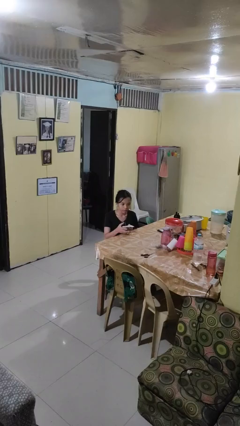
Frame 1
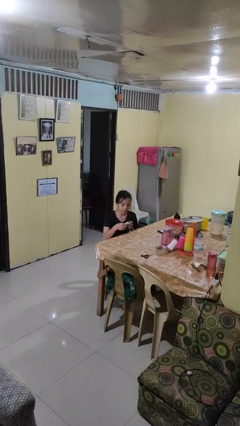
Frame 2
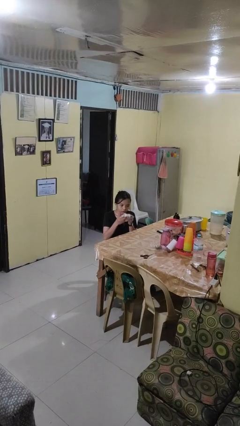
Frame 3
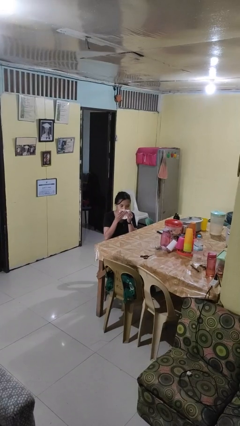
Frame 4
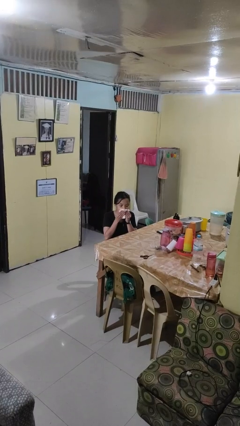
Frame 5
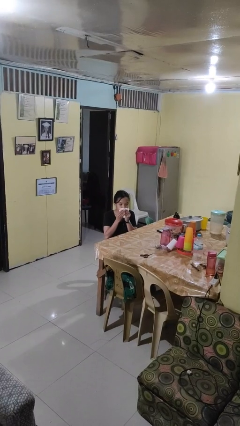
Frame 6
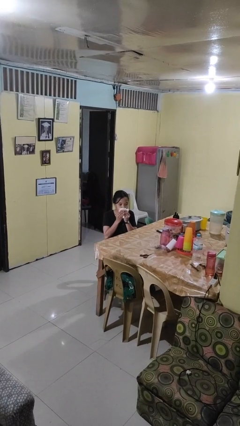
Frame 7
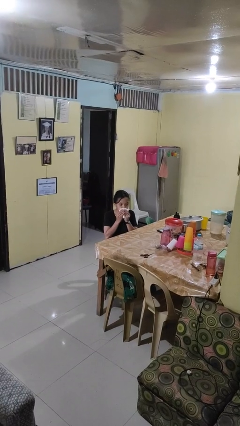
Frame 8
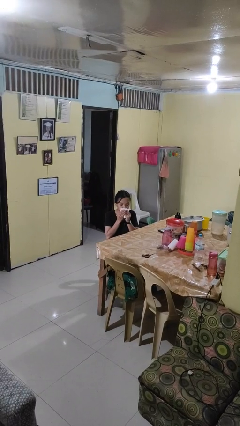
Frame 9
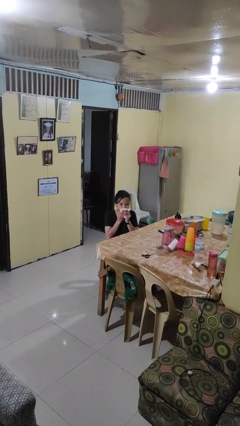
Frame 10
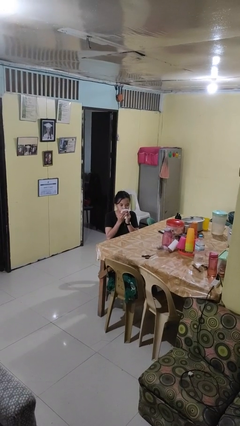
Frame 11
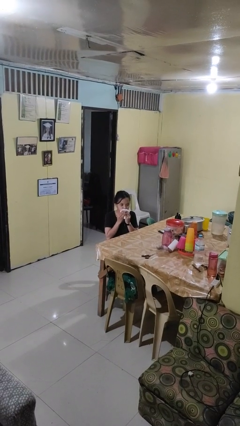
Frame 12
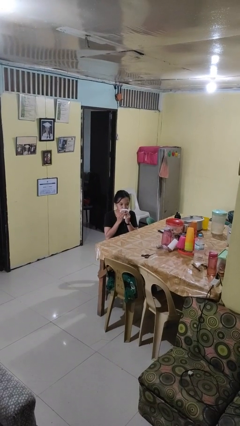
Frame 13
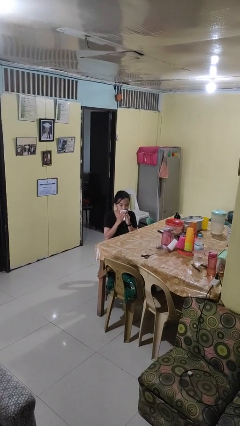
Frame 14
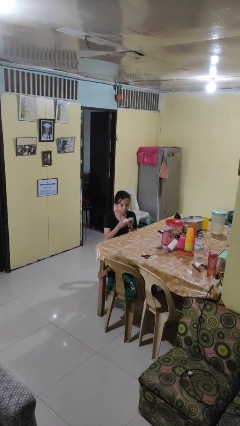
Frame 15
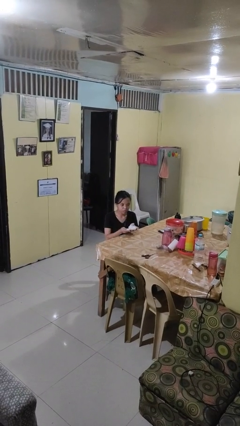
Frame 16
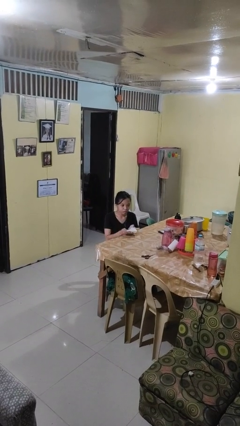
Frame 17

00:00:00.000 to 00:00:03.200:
person wipes mouth with napkin

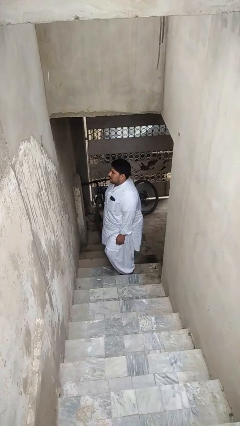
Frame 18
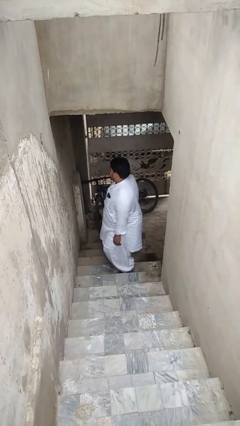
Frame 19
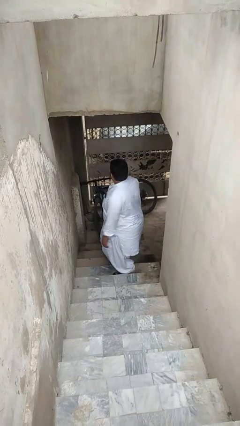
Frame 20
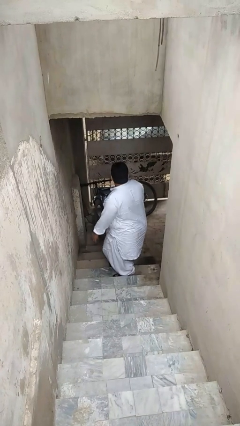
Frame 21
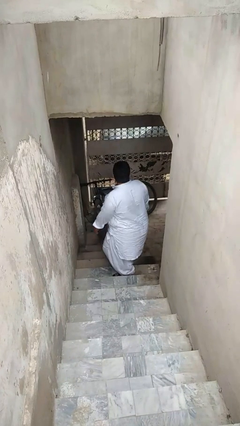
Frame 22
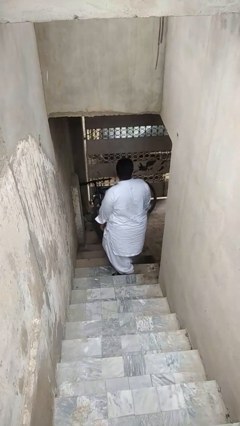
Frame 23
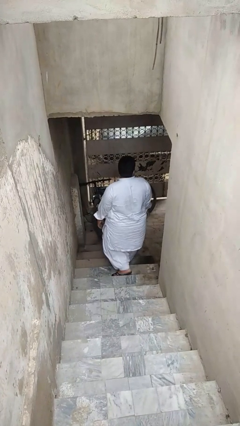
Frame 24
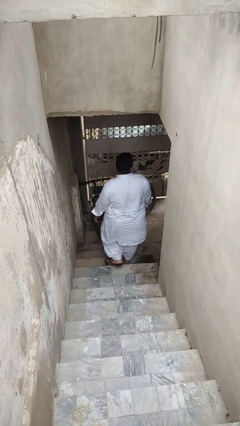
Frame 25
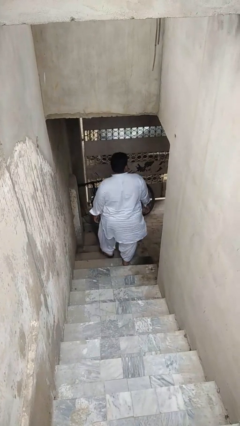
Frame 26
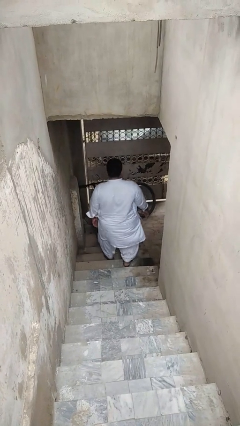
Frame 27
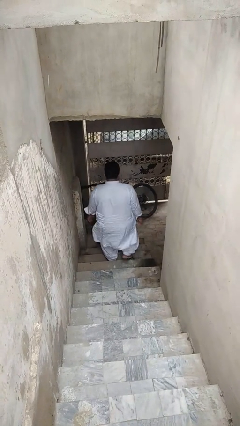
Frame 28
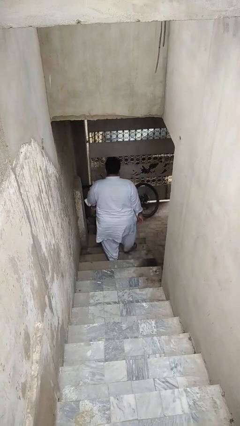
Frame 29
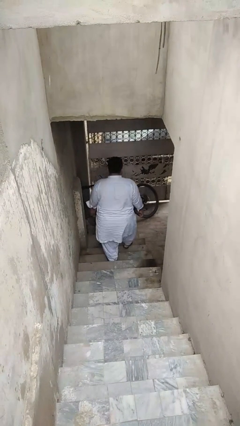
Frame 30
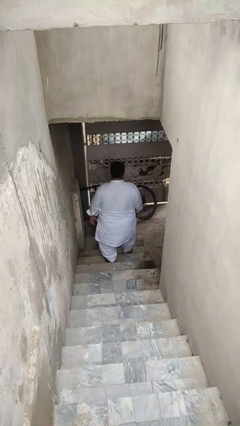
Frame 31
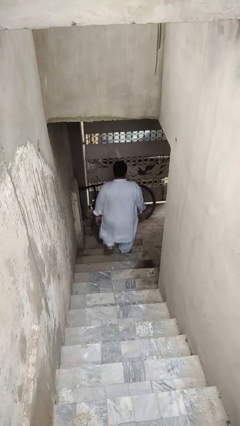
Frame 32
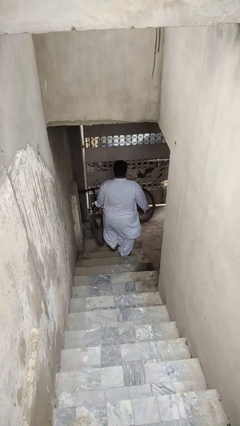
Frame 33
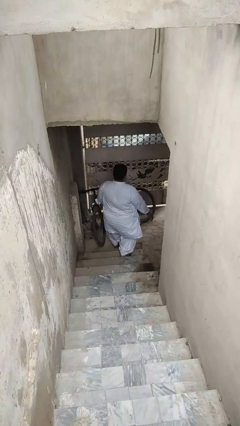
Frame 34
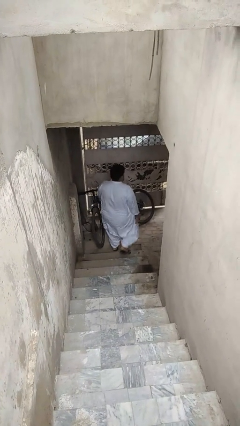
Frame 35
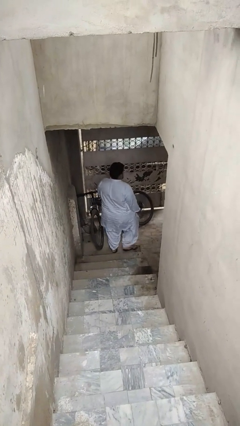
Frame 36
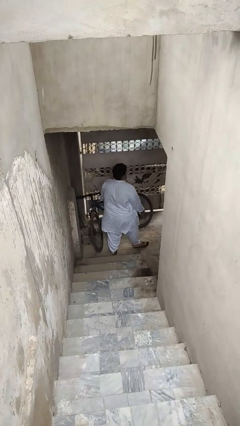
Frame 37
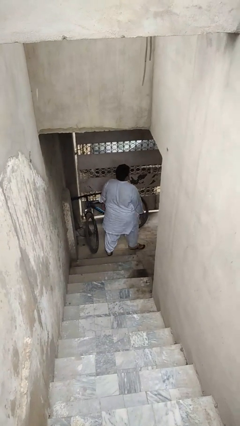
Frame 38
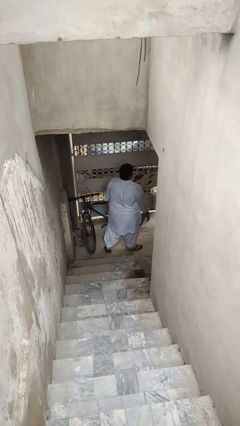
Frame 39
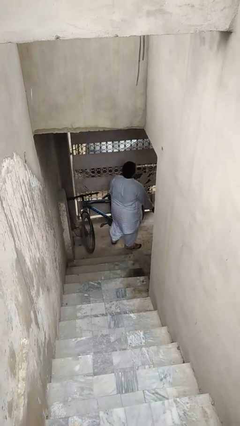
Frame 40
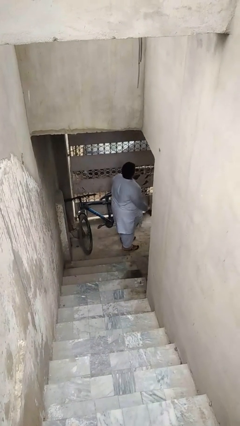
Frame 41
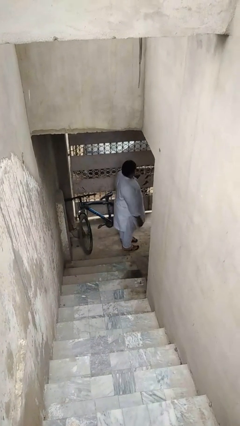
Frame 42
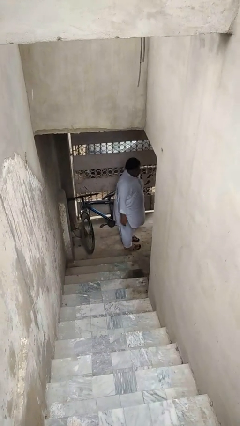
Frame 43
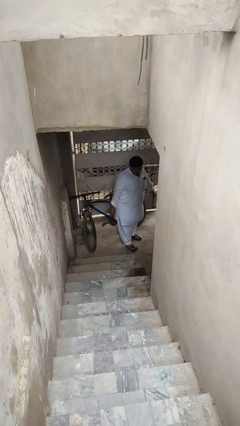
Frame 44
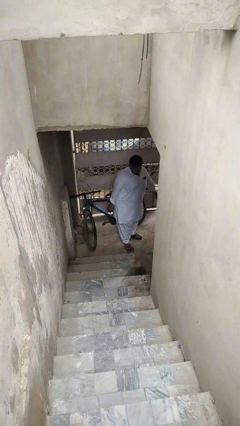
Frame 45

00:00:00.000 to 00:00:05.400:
person climbs down stairs

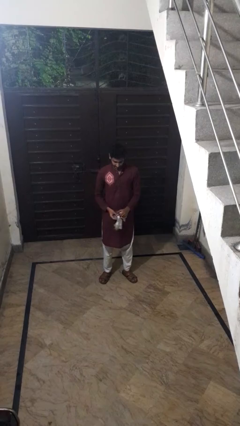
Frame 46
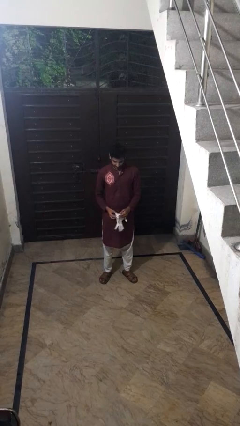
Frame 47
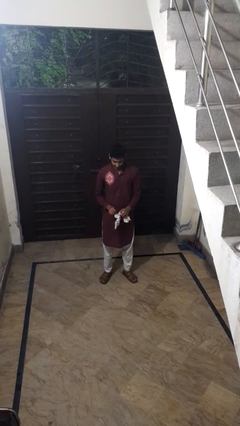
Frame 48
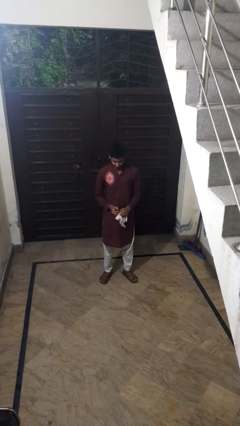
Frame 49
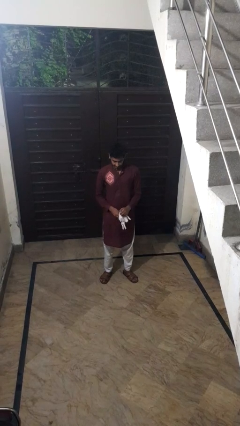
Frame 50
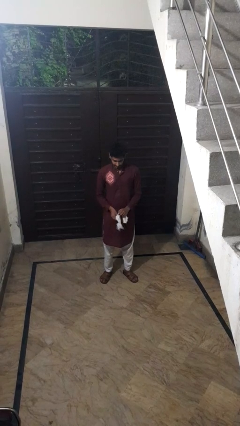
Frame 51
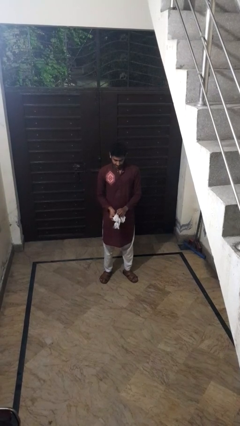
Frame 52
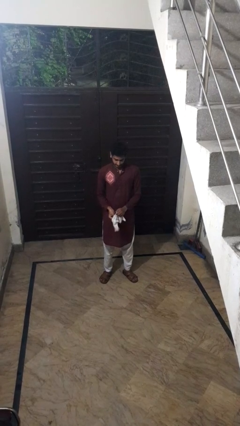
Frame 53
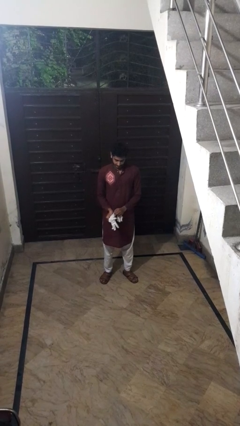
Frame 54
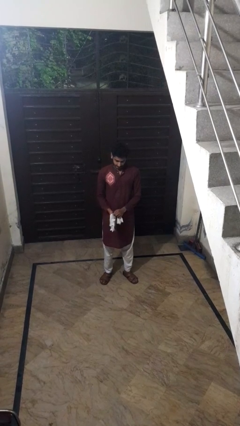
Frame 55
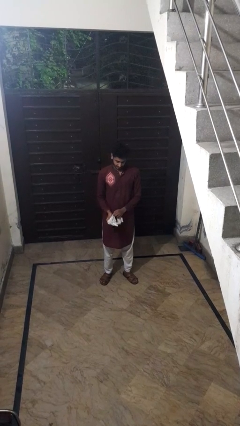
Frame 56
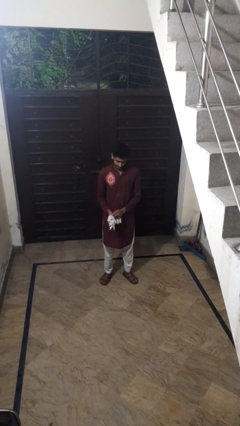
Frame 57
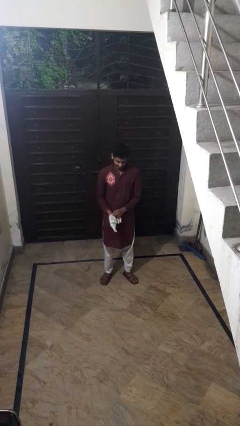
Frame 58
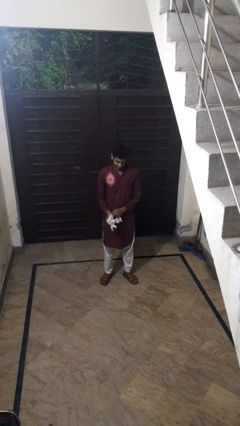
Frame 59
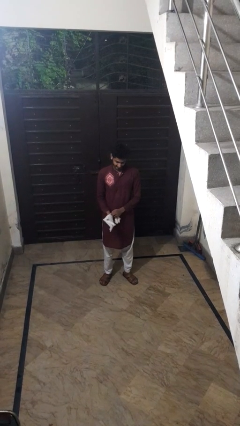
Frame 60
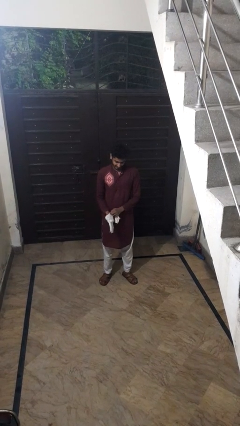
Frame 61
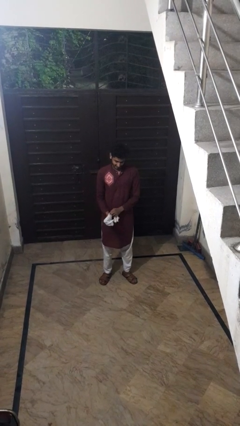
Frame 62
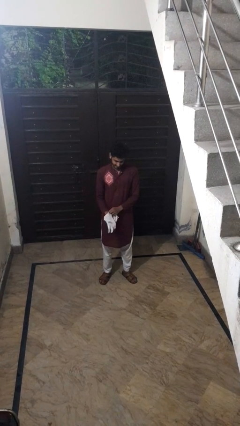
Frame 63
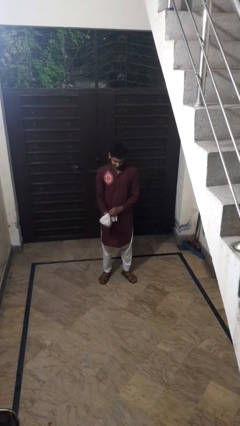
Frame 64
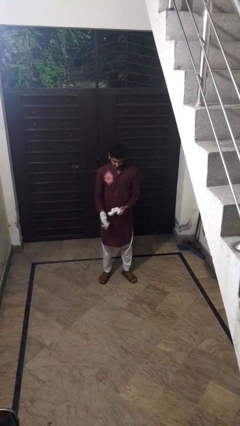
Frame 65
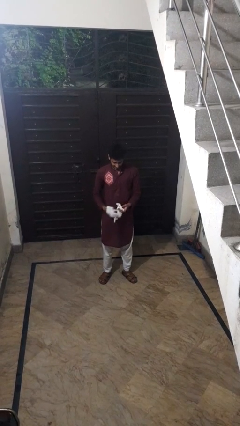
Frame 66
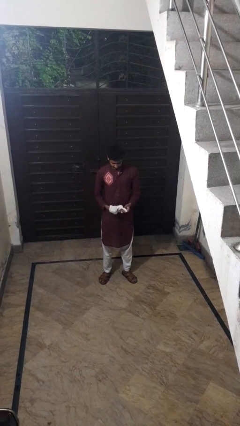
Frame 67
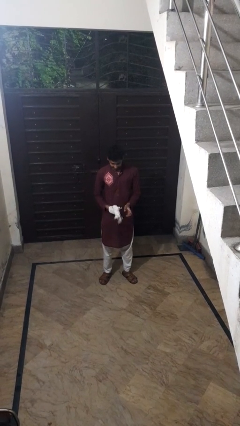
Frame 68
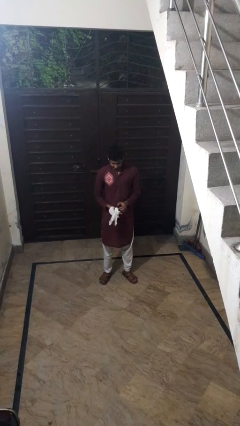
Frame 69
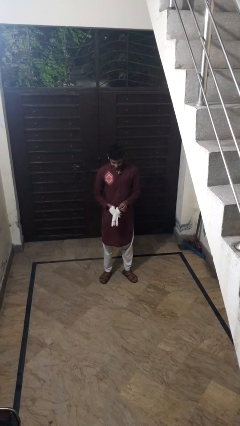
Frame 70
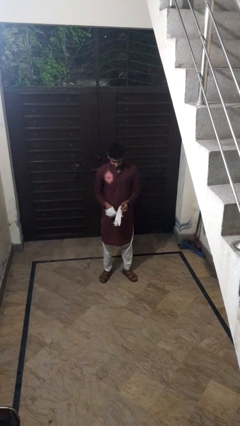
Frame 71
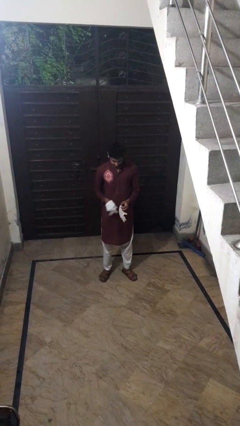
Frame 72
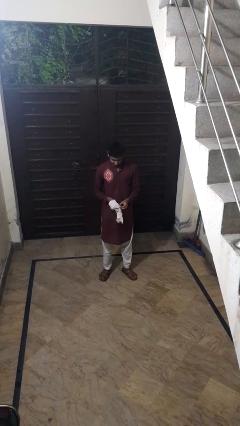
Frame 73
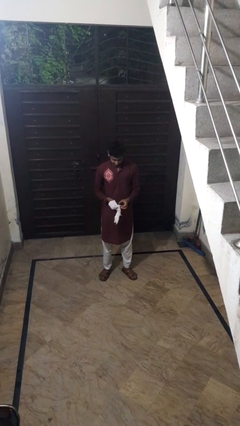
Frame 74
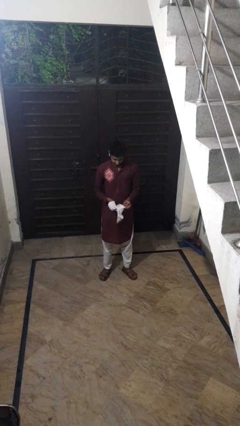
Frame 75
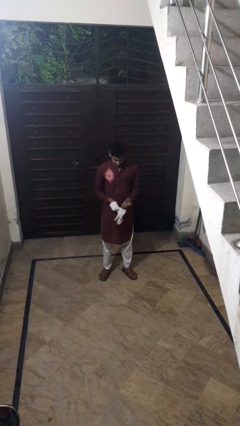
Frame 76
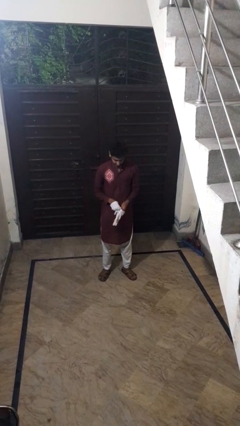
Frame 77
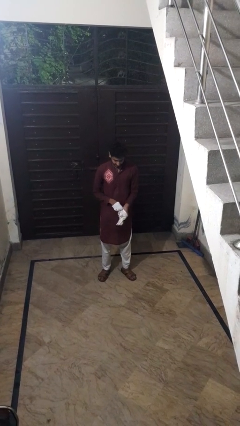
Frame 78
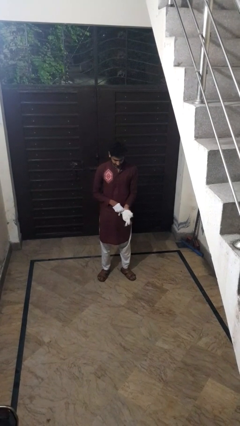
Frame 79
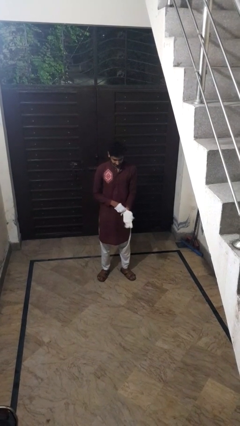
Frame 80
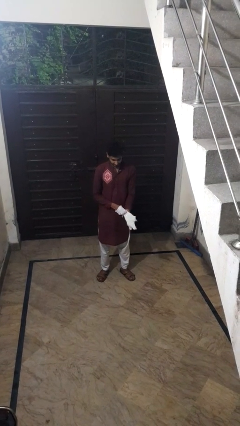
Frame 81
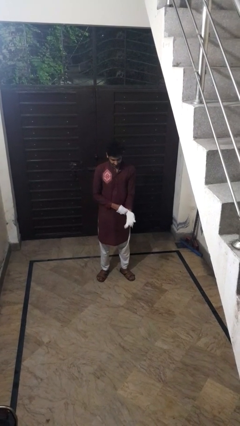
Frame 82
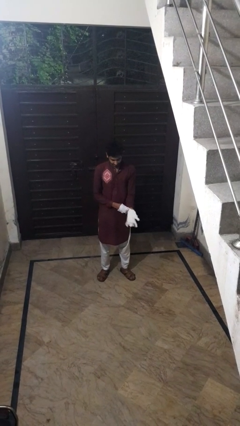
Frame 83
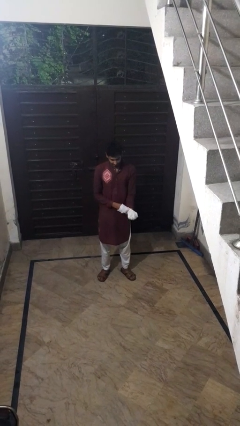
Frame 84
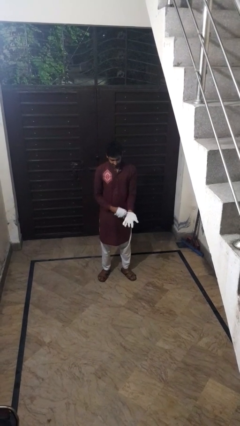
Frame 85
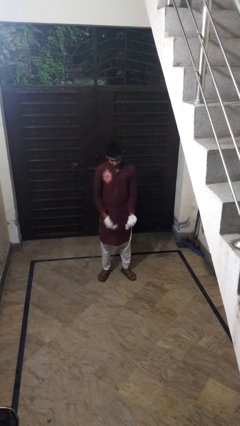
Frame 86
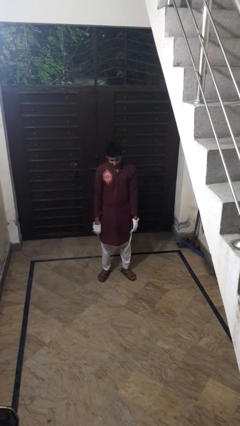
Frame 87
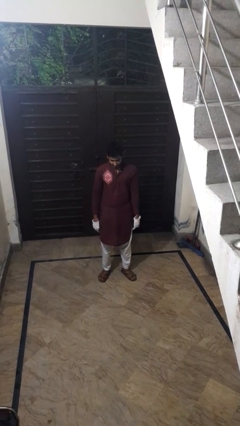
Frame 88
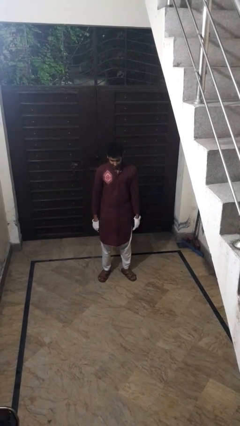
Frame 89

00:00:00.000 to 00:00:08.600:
person puts on gloves
